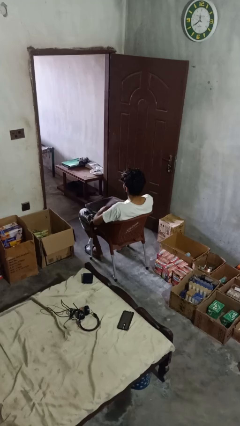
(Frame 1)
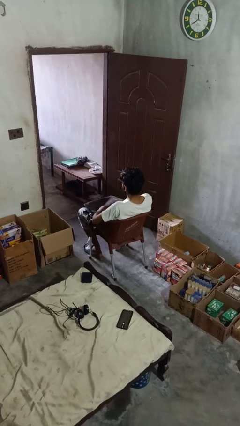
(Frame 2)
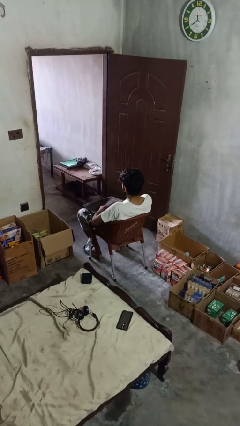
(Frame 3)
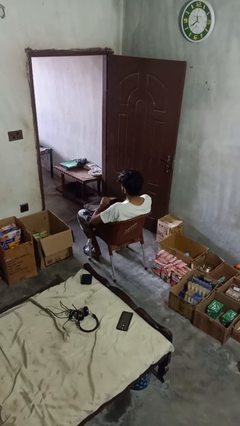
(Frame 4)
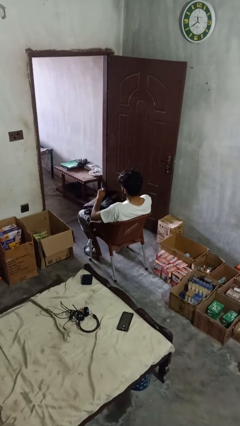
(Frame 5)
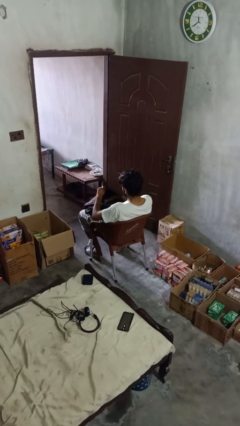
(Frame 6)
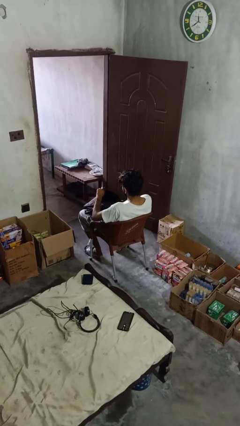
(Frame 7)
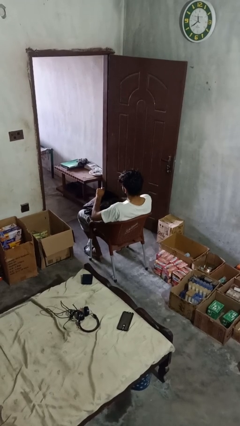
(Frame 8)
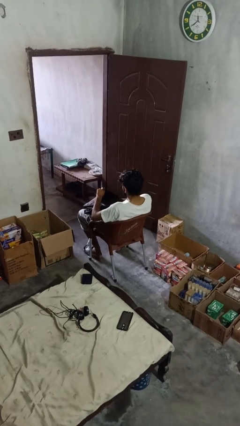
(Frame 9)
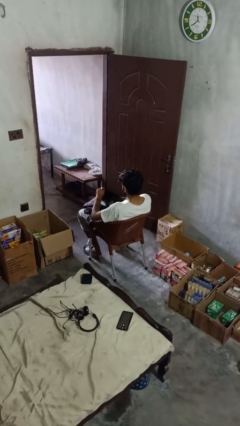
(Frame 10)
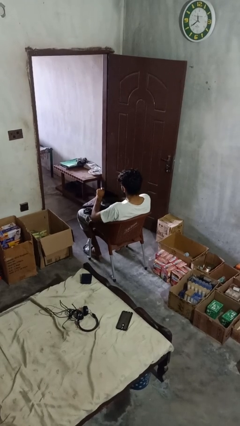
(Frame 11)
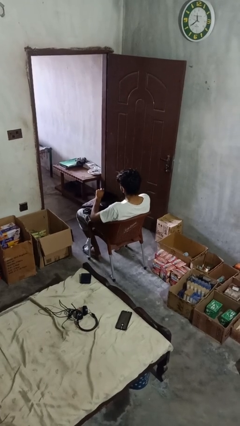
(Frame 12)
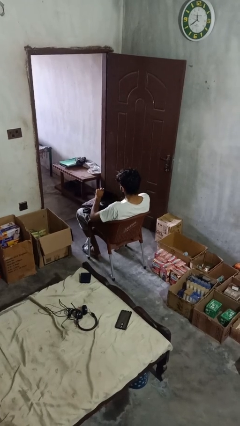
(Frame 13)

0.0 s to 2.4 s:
person searches in backpack

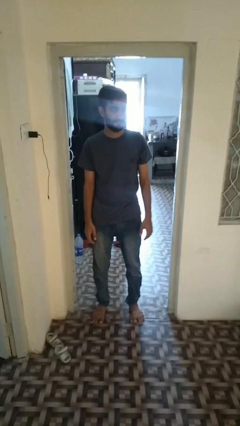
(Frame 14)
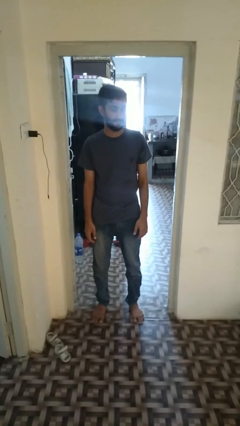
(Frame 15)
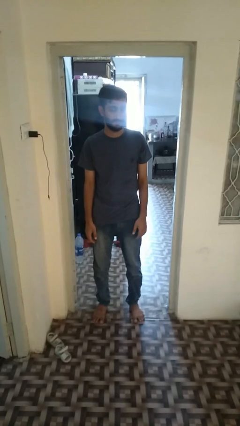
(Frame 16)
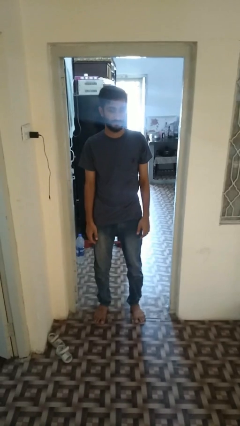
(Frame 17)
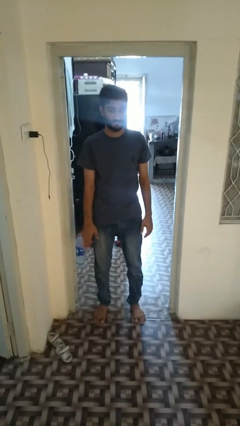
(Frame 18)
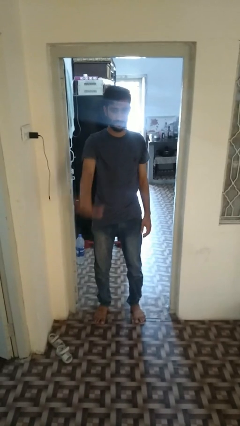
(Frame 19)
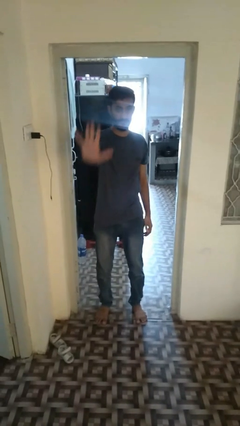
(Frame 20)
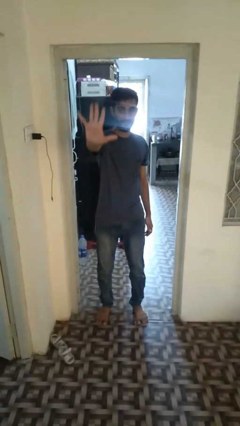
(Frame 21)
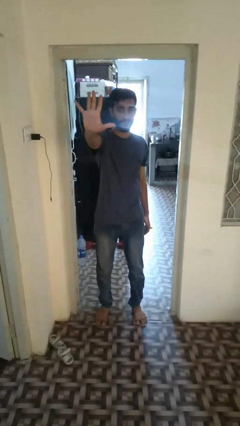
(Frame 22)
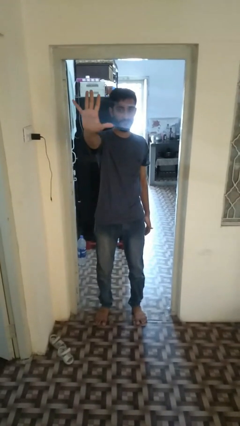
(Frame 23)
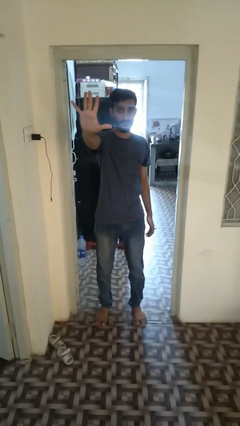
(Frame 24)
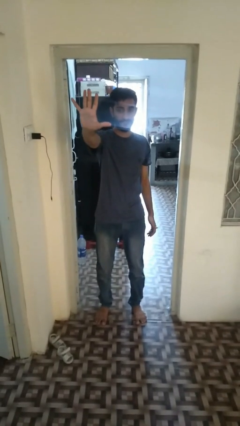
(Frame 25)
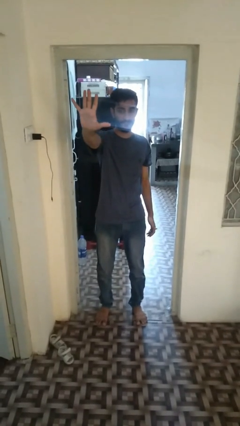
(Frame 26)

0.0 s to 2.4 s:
person gestures number five

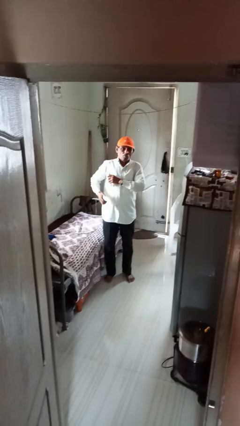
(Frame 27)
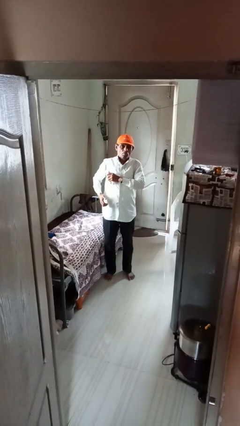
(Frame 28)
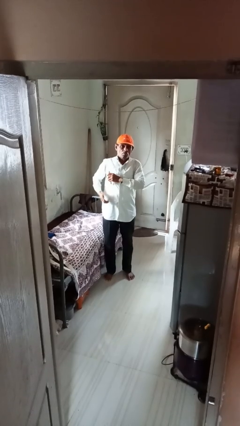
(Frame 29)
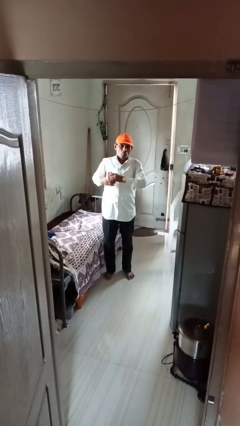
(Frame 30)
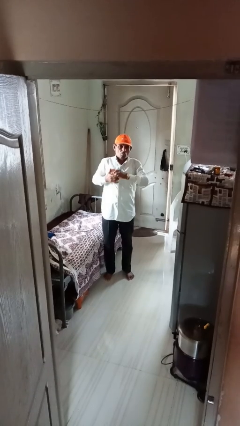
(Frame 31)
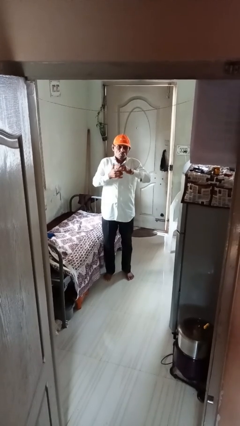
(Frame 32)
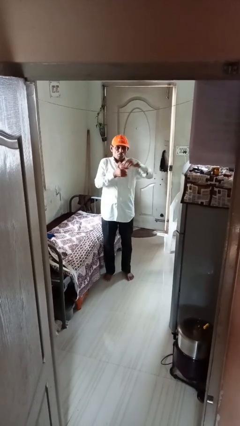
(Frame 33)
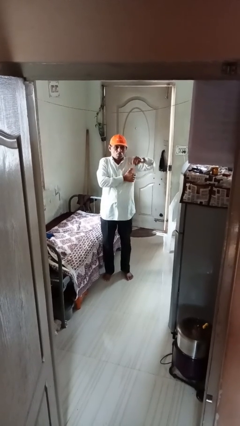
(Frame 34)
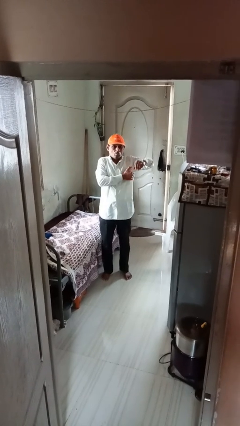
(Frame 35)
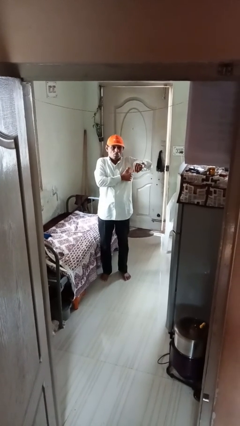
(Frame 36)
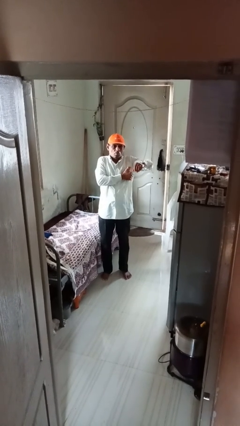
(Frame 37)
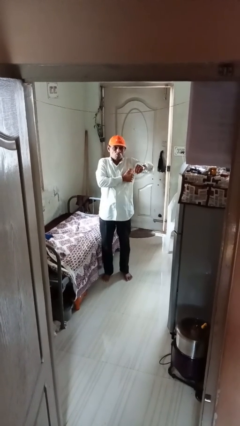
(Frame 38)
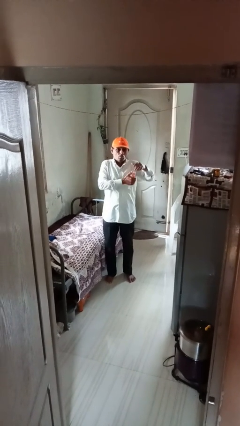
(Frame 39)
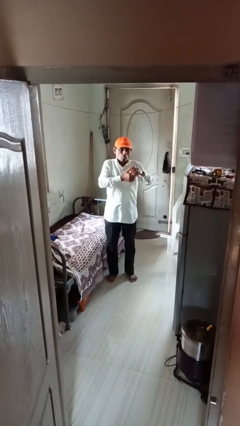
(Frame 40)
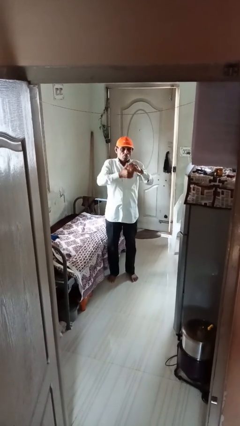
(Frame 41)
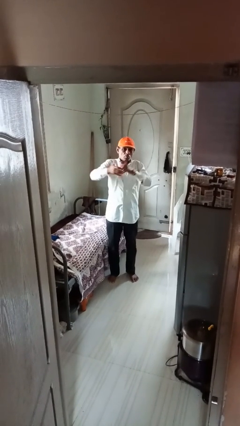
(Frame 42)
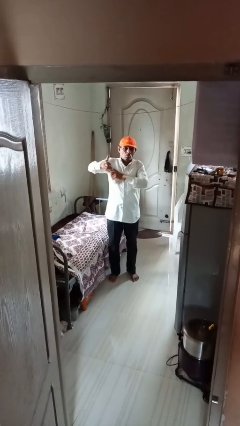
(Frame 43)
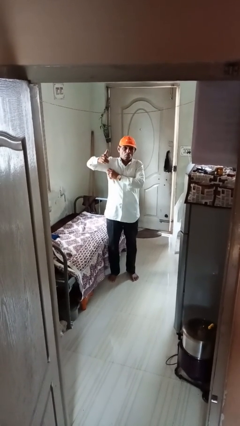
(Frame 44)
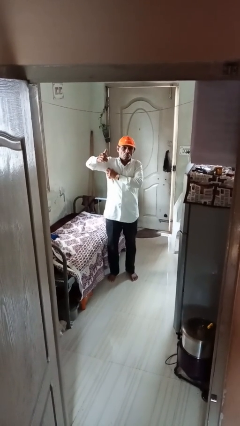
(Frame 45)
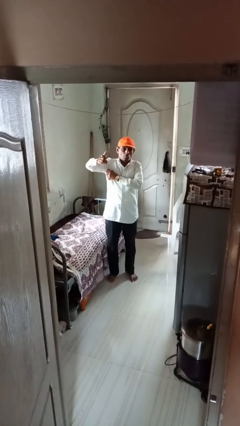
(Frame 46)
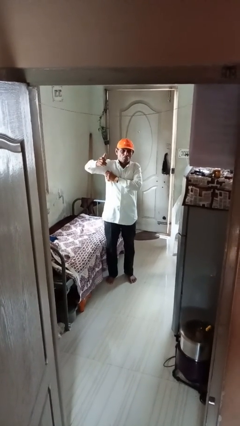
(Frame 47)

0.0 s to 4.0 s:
person applies deodorant

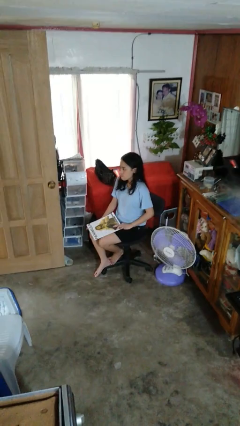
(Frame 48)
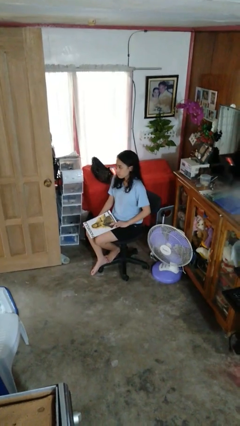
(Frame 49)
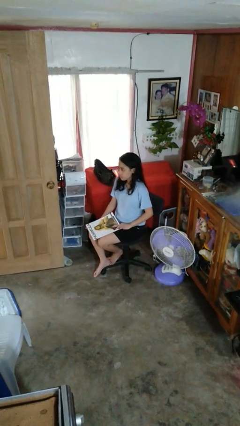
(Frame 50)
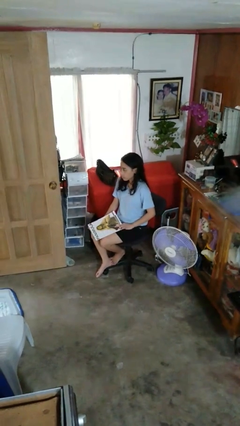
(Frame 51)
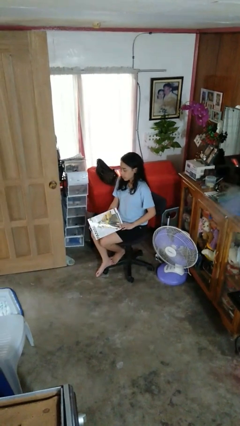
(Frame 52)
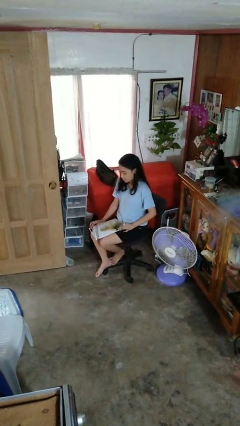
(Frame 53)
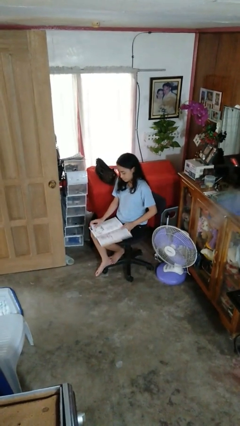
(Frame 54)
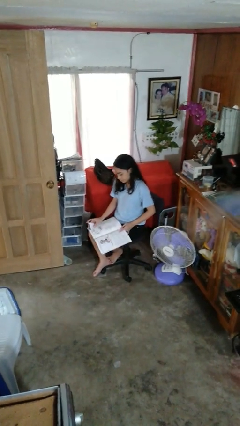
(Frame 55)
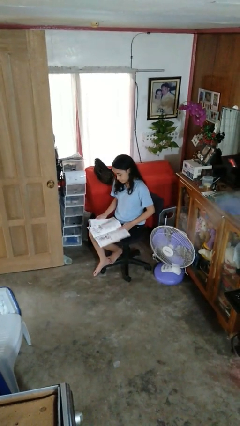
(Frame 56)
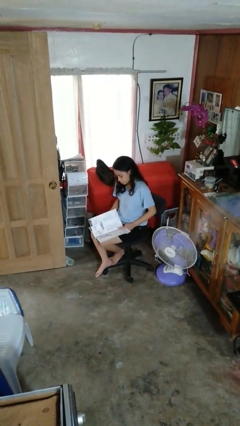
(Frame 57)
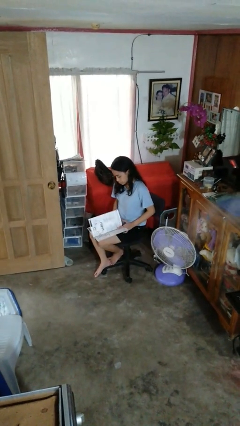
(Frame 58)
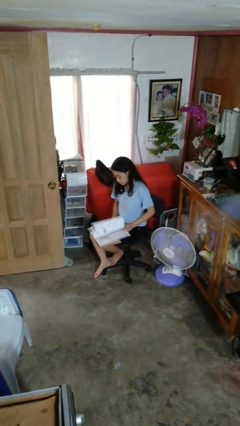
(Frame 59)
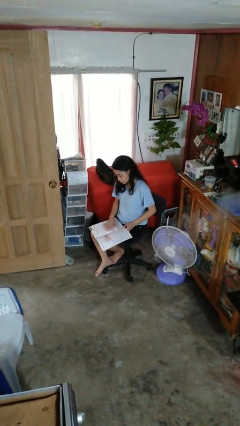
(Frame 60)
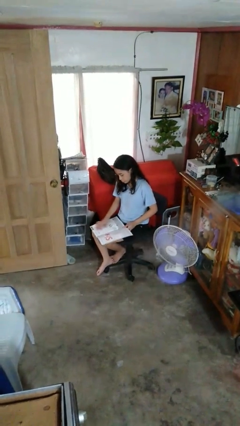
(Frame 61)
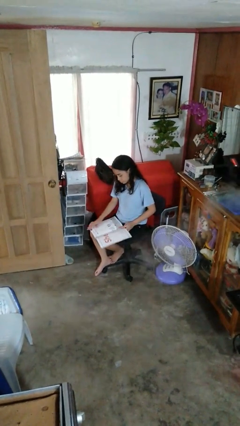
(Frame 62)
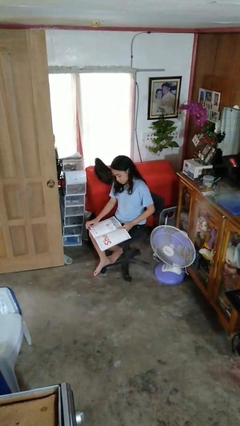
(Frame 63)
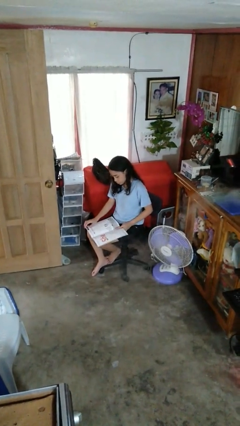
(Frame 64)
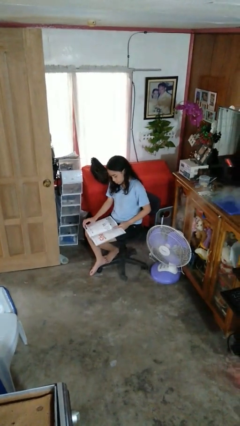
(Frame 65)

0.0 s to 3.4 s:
person reads magazine

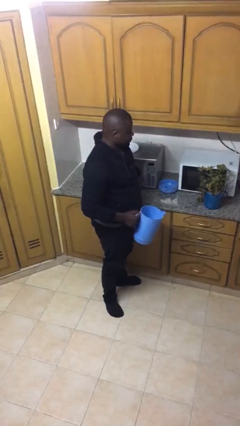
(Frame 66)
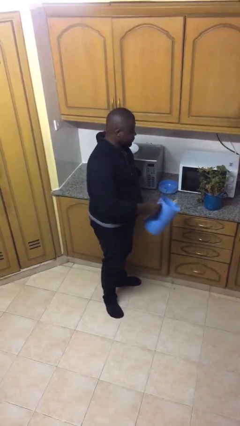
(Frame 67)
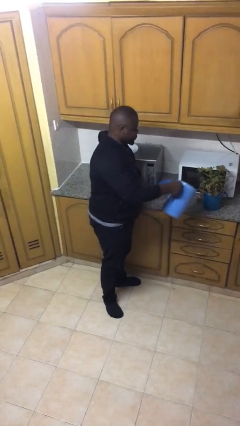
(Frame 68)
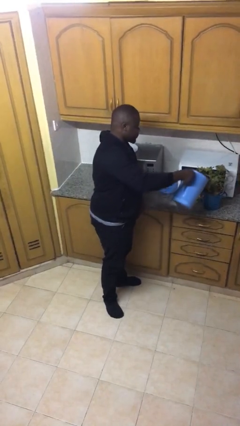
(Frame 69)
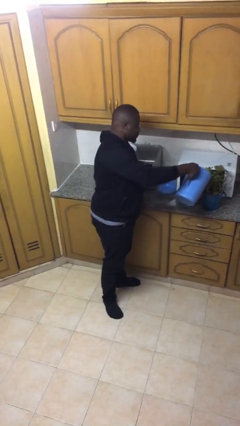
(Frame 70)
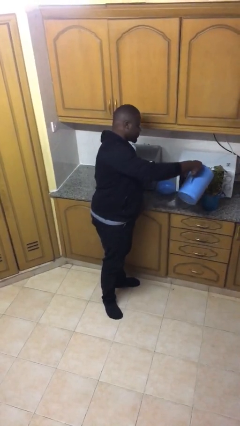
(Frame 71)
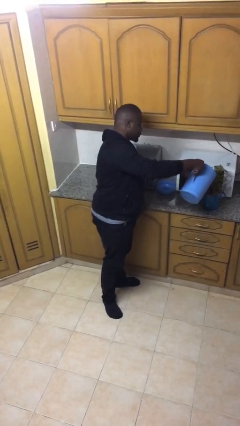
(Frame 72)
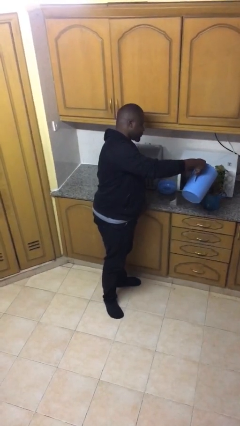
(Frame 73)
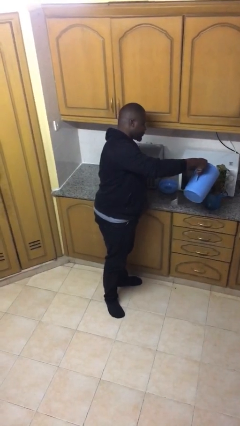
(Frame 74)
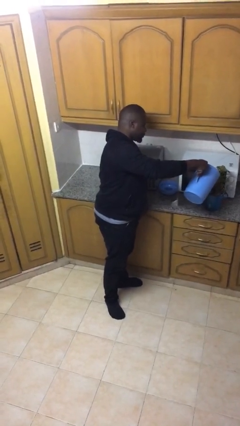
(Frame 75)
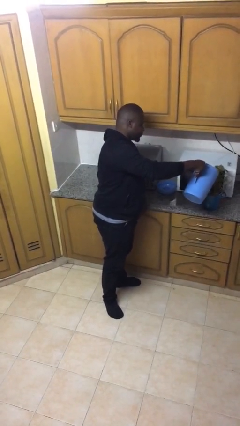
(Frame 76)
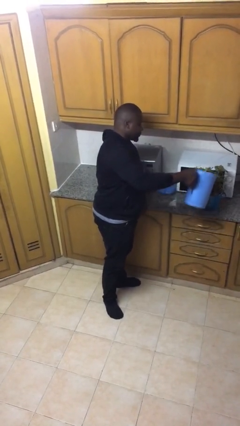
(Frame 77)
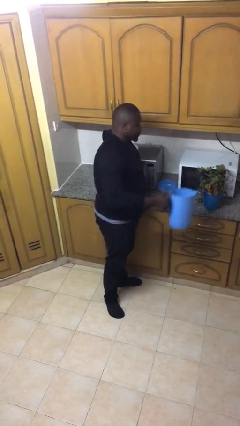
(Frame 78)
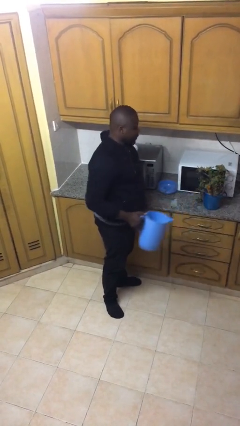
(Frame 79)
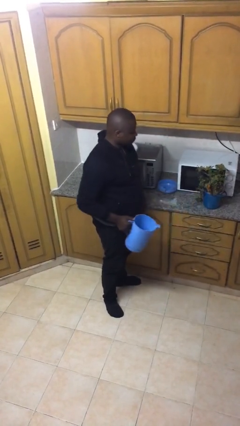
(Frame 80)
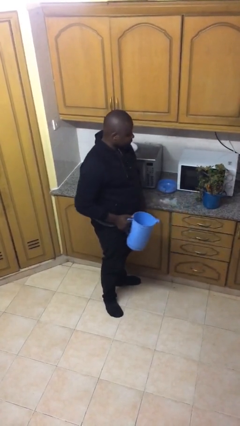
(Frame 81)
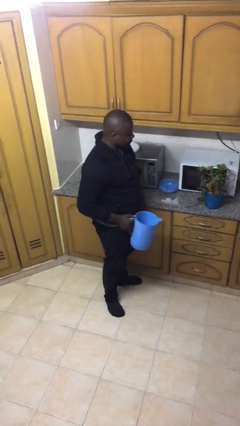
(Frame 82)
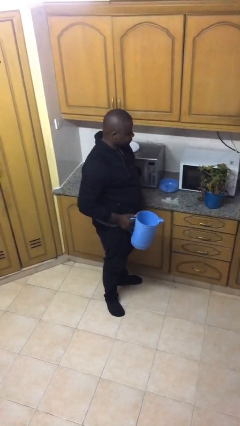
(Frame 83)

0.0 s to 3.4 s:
person waters houseplant

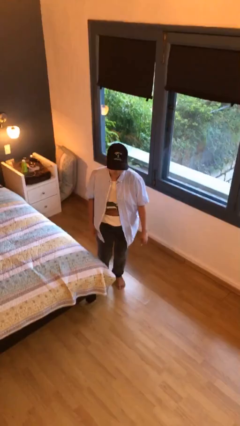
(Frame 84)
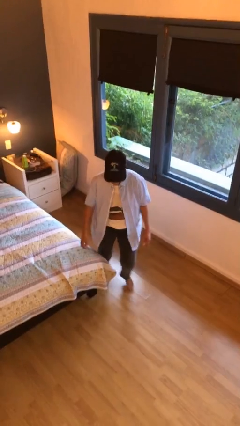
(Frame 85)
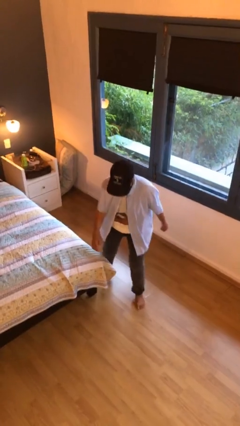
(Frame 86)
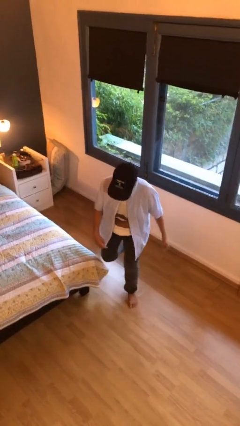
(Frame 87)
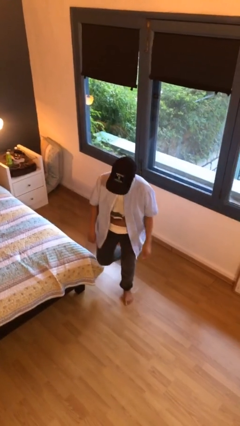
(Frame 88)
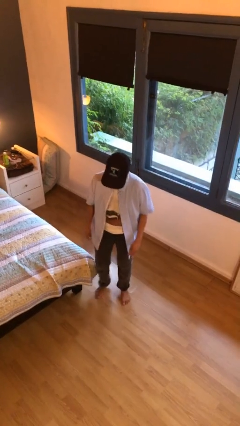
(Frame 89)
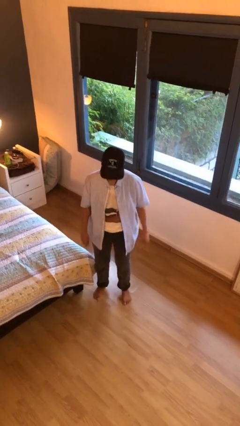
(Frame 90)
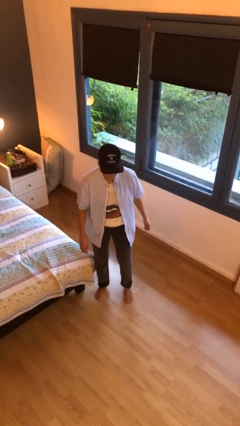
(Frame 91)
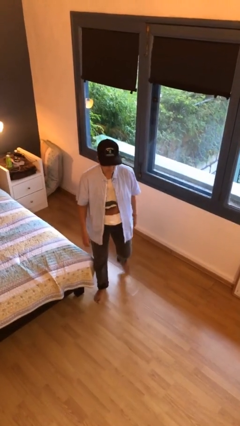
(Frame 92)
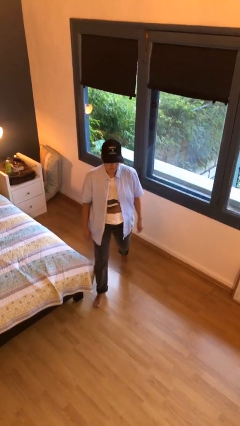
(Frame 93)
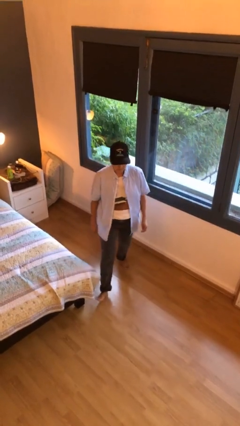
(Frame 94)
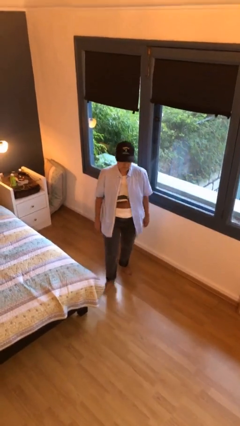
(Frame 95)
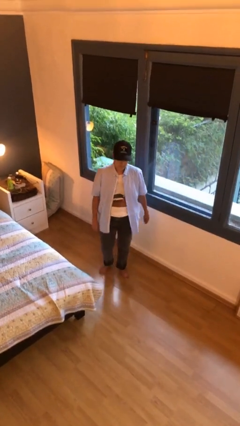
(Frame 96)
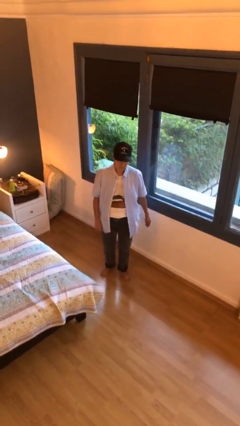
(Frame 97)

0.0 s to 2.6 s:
person stubs toe
